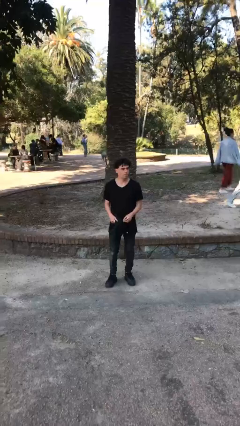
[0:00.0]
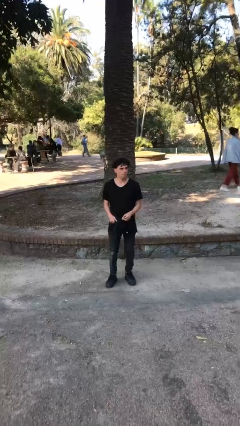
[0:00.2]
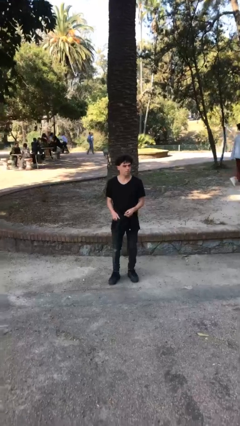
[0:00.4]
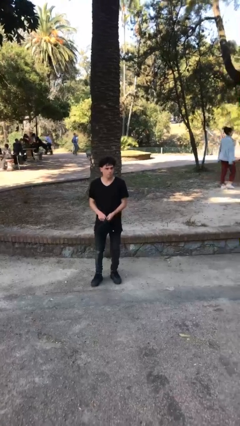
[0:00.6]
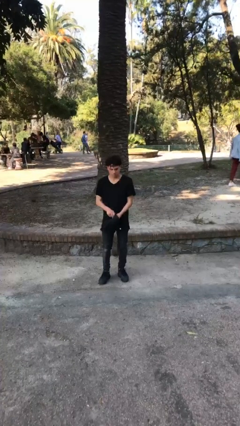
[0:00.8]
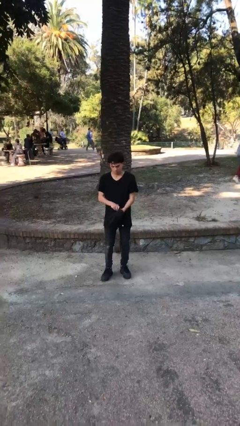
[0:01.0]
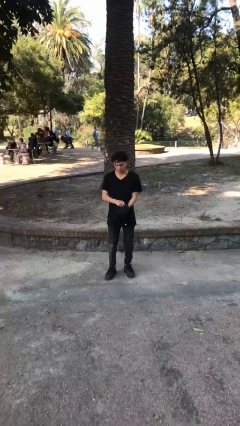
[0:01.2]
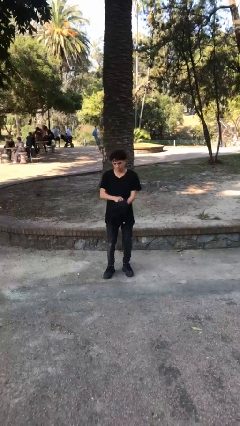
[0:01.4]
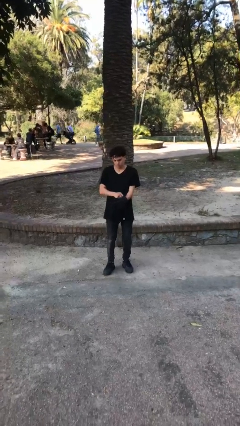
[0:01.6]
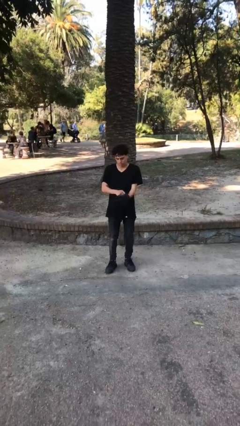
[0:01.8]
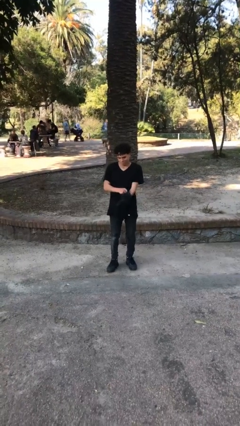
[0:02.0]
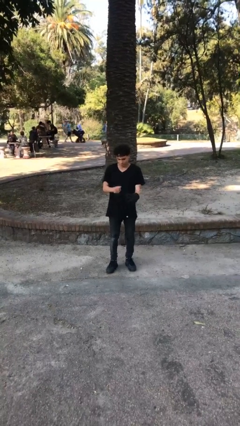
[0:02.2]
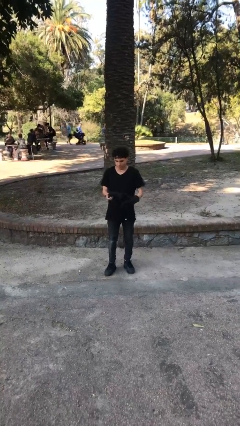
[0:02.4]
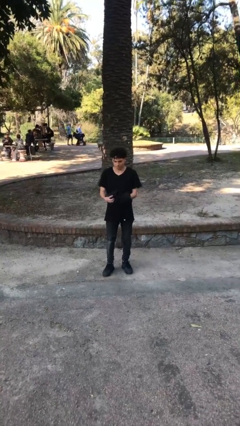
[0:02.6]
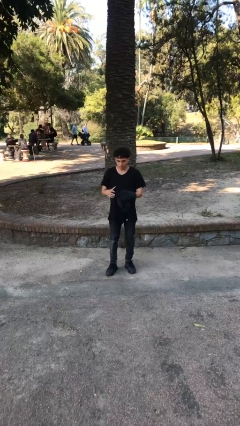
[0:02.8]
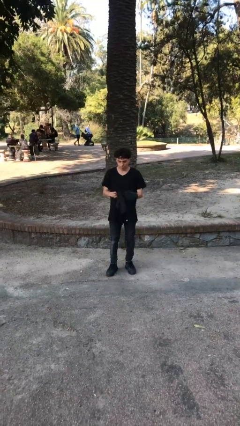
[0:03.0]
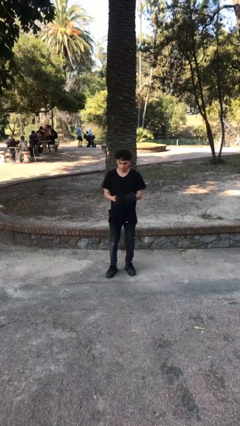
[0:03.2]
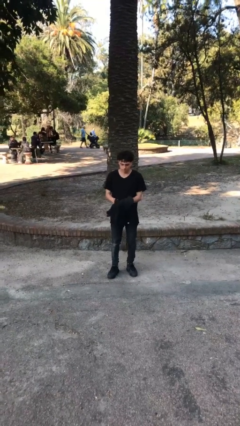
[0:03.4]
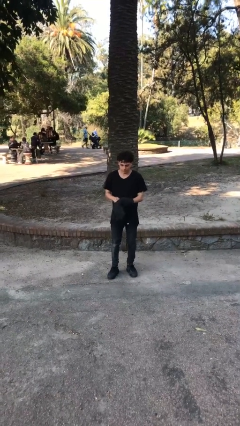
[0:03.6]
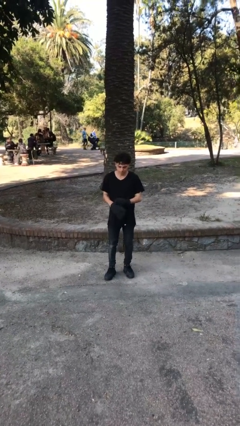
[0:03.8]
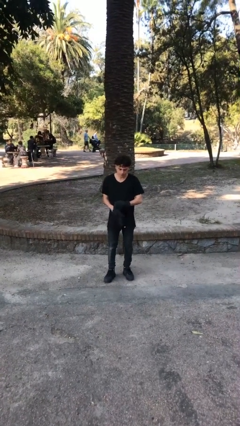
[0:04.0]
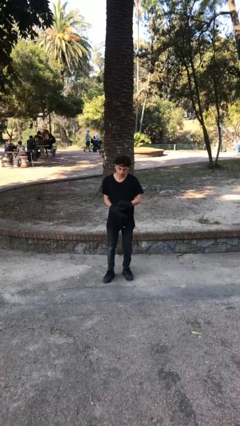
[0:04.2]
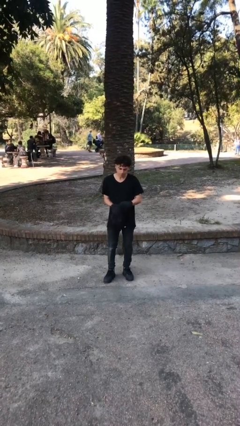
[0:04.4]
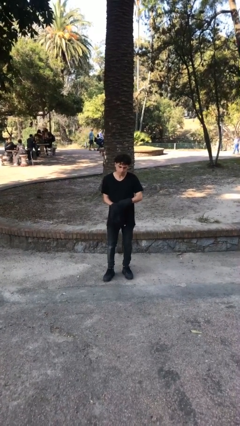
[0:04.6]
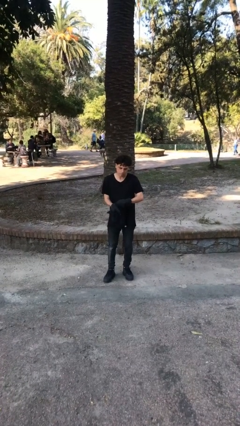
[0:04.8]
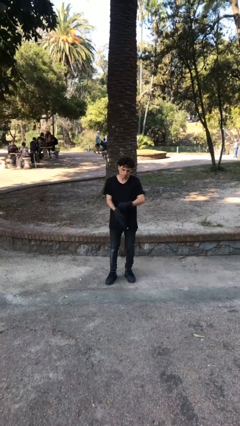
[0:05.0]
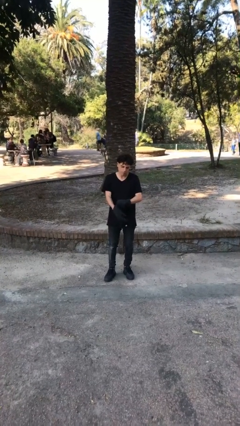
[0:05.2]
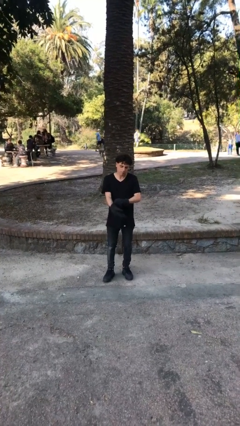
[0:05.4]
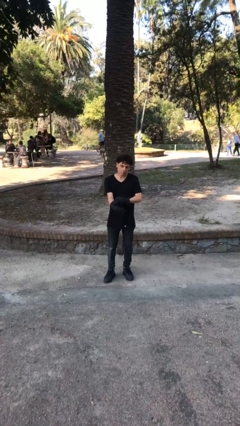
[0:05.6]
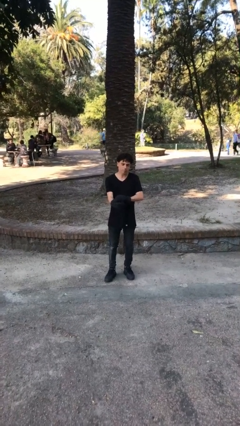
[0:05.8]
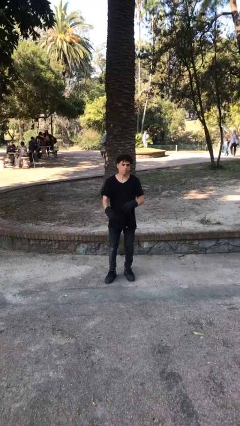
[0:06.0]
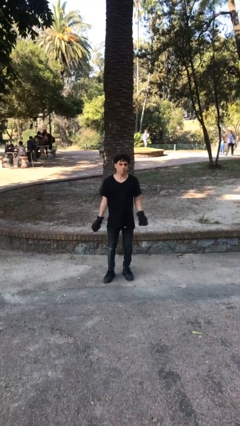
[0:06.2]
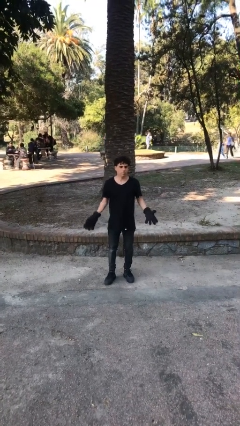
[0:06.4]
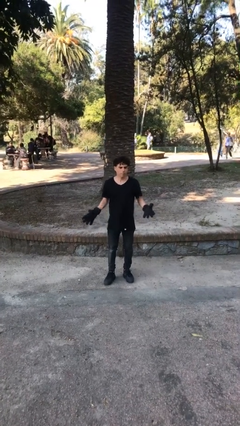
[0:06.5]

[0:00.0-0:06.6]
person puts on gloves

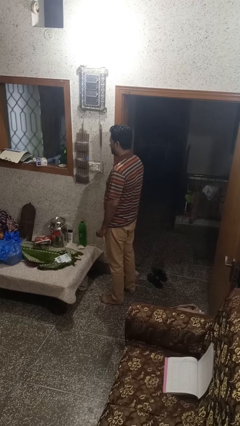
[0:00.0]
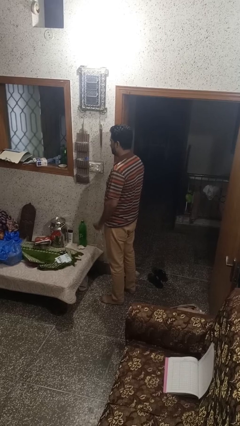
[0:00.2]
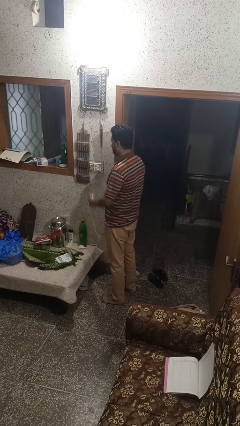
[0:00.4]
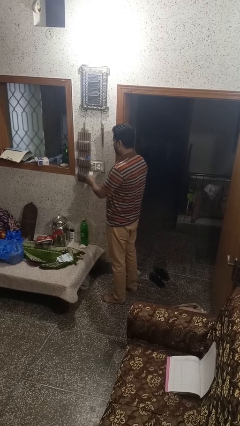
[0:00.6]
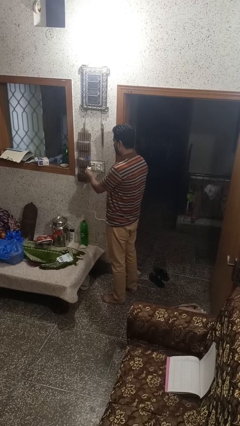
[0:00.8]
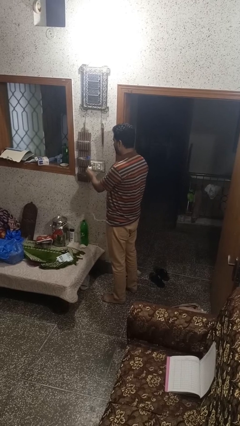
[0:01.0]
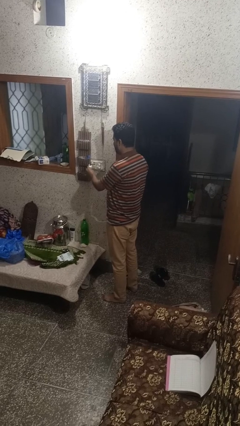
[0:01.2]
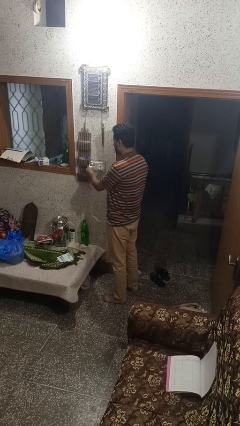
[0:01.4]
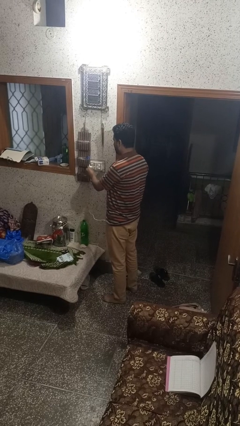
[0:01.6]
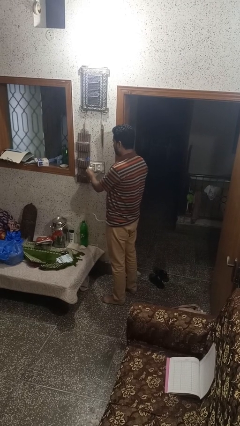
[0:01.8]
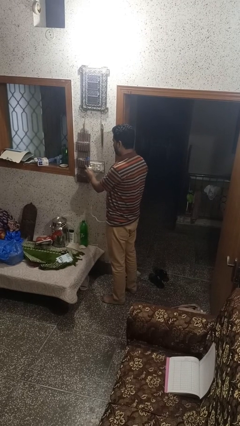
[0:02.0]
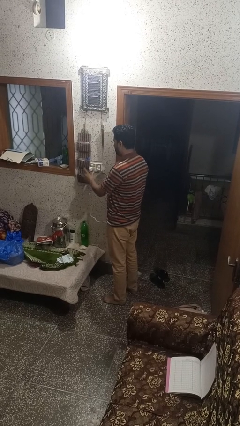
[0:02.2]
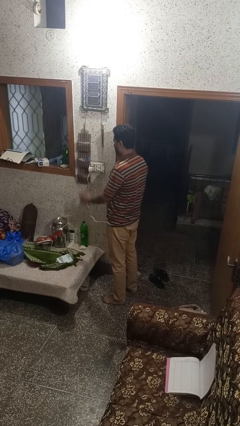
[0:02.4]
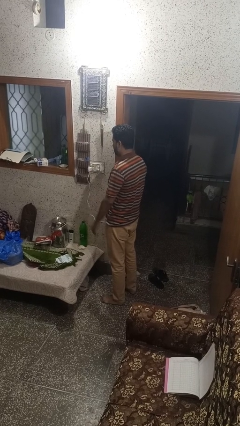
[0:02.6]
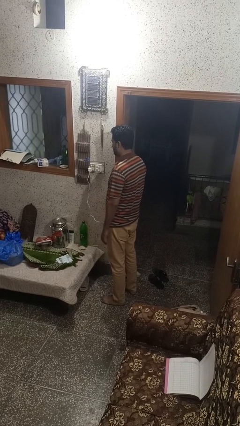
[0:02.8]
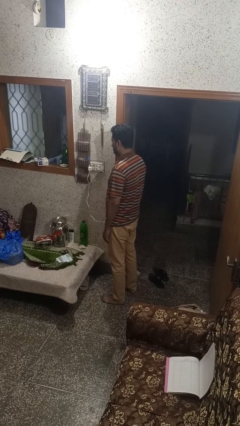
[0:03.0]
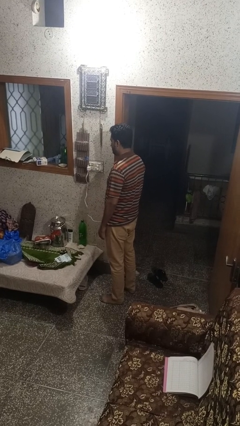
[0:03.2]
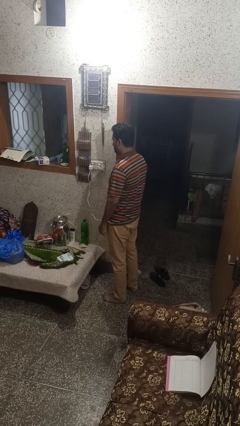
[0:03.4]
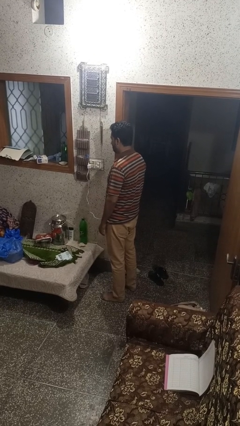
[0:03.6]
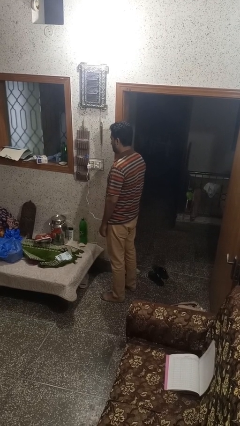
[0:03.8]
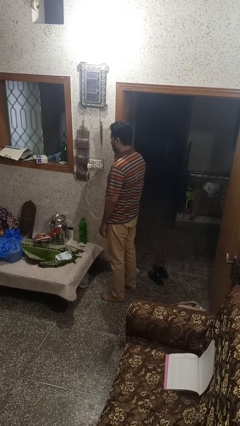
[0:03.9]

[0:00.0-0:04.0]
person plugs into electrical socket

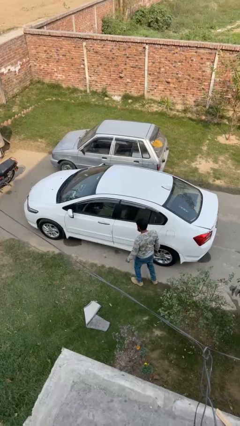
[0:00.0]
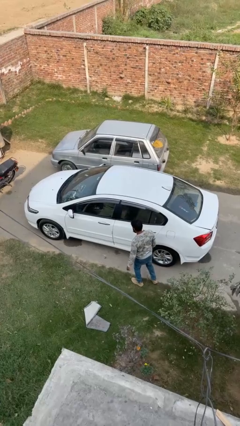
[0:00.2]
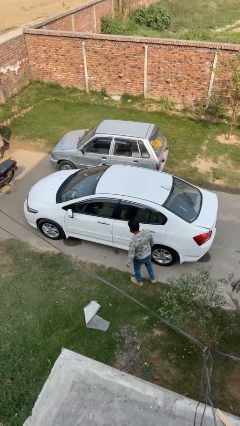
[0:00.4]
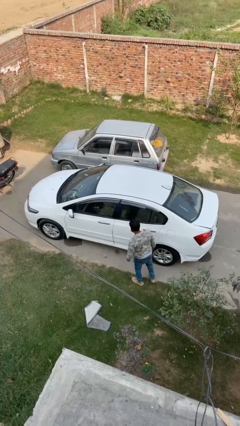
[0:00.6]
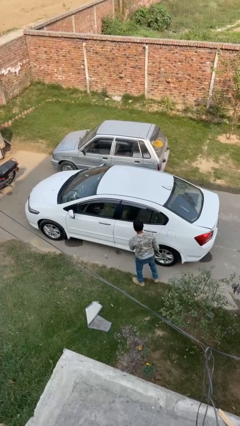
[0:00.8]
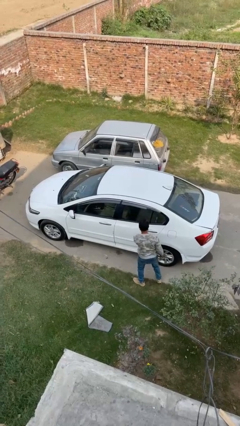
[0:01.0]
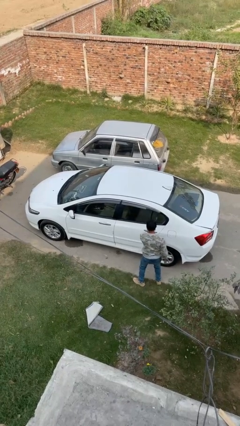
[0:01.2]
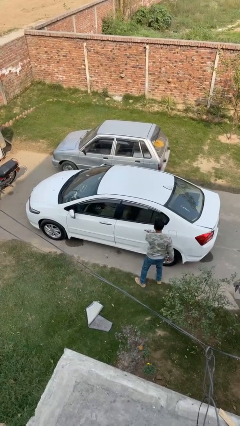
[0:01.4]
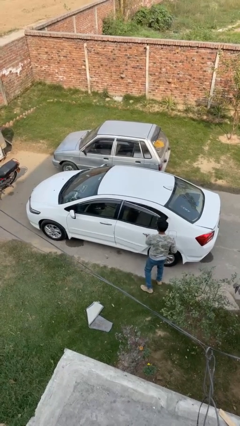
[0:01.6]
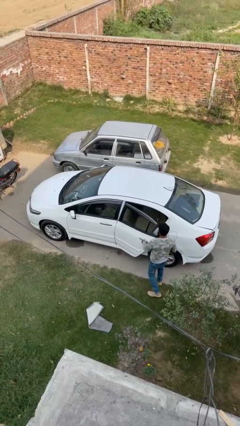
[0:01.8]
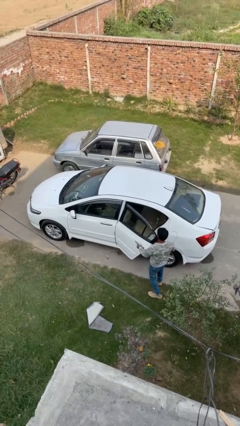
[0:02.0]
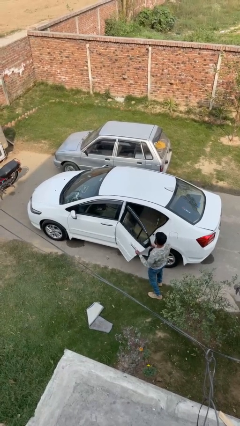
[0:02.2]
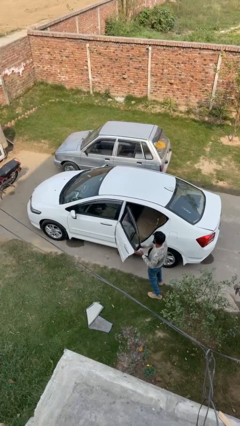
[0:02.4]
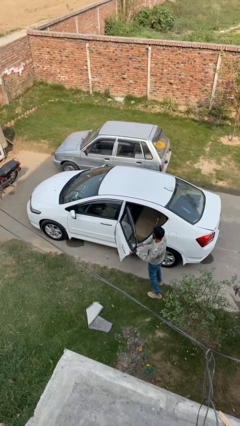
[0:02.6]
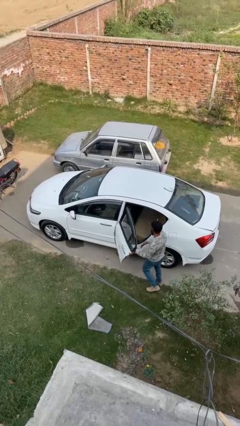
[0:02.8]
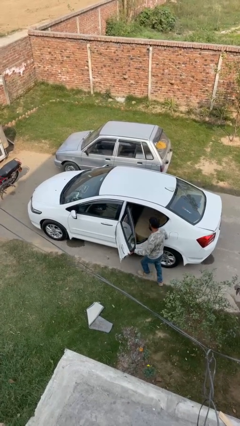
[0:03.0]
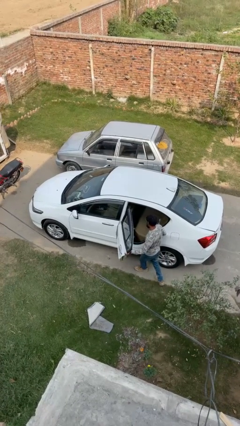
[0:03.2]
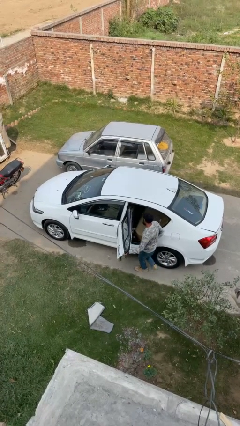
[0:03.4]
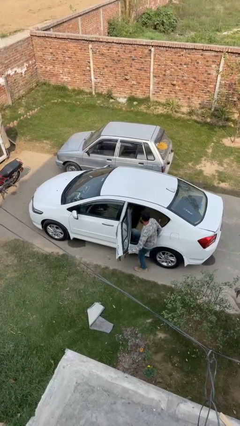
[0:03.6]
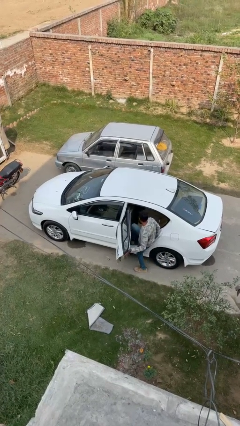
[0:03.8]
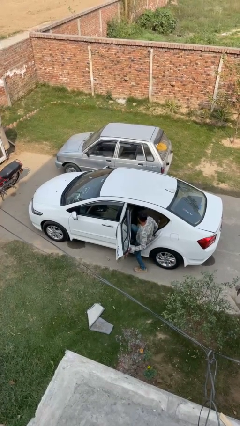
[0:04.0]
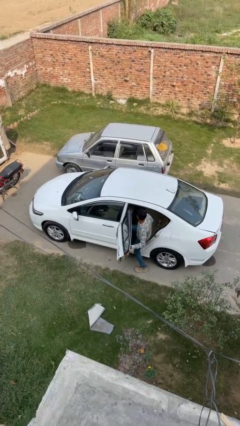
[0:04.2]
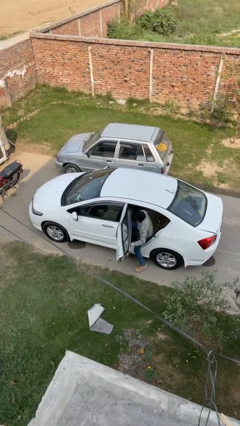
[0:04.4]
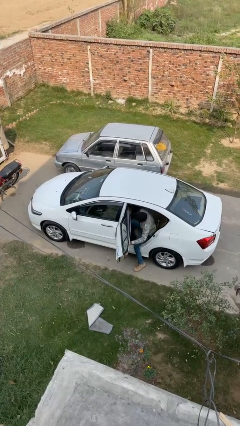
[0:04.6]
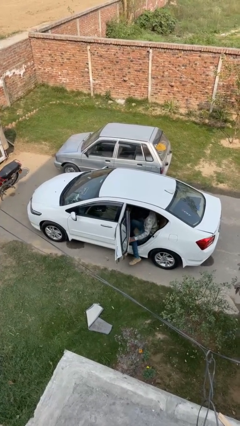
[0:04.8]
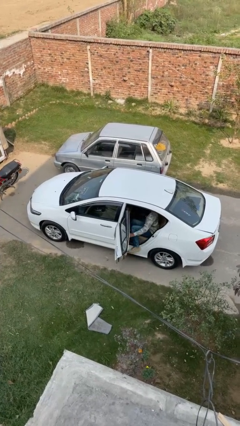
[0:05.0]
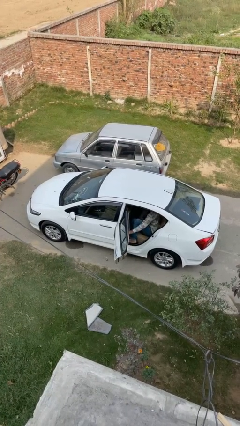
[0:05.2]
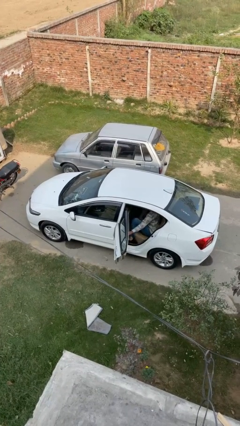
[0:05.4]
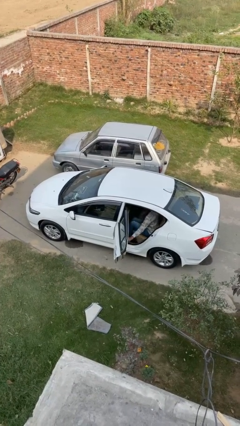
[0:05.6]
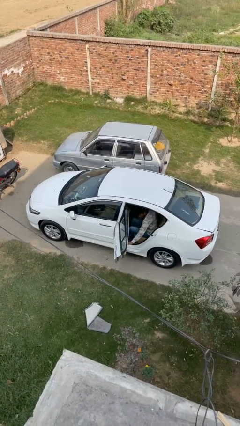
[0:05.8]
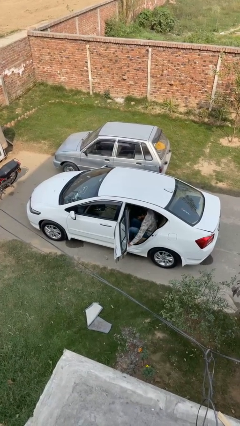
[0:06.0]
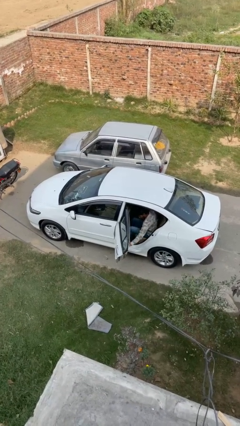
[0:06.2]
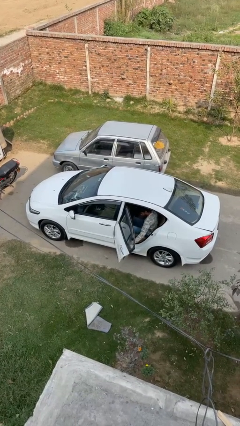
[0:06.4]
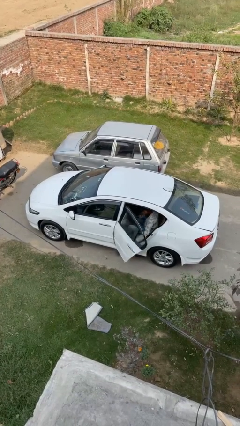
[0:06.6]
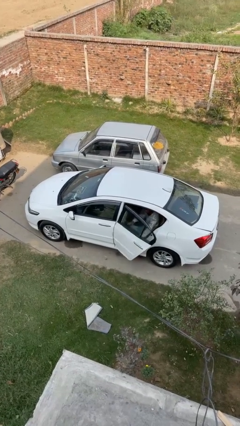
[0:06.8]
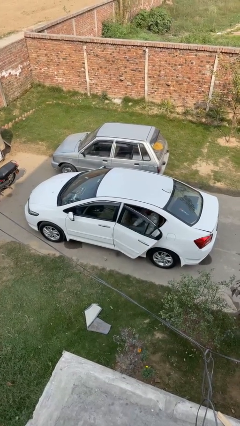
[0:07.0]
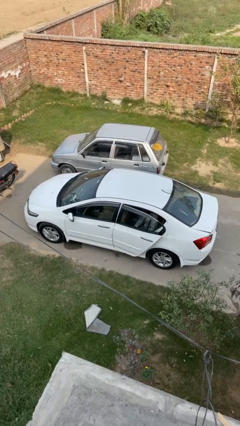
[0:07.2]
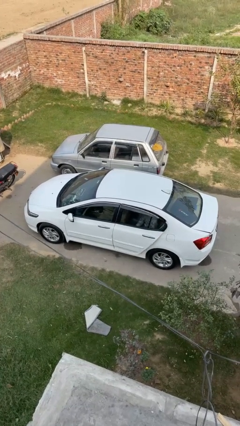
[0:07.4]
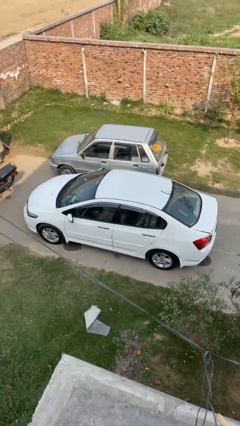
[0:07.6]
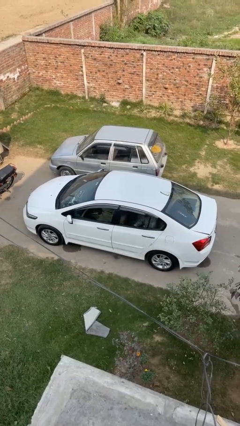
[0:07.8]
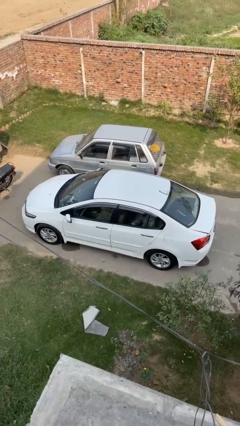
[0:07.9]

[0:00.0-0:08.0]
car picks up person
